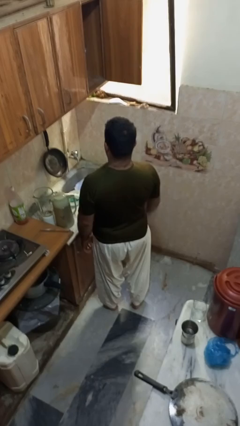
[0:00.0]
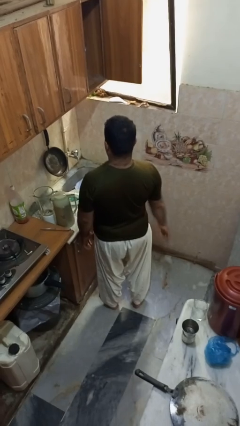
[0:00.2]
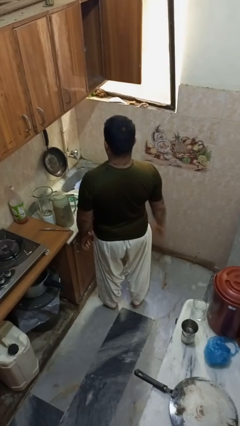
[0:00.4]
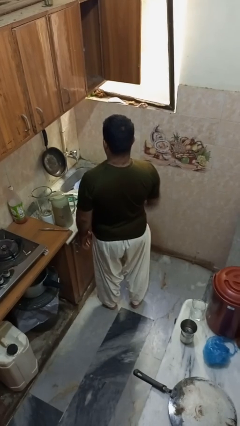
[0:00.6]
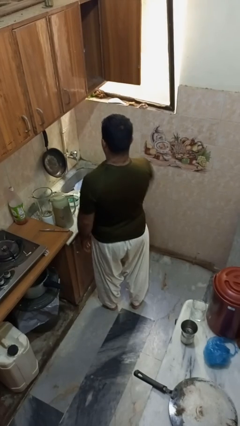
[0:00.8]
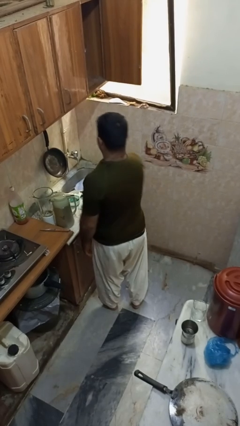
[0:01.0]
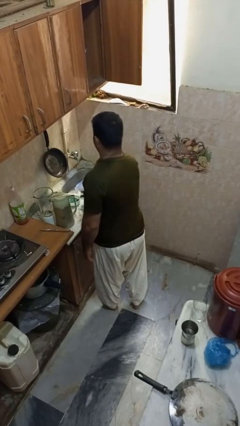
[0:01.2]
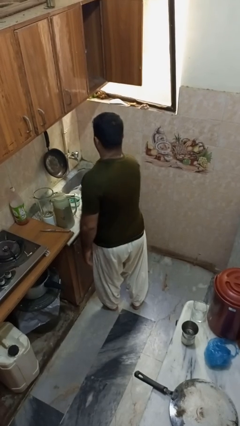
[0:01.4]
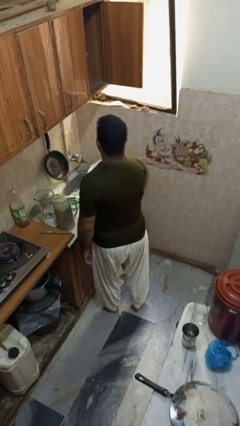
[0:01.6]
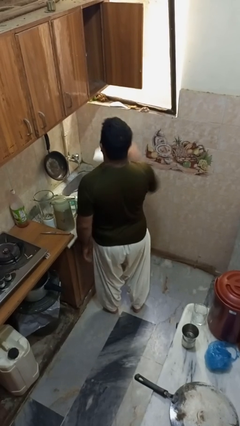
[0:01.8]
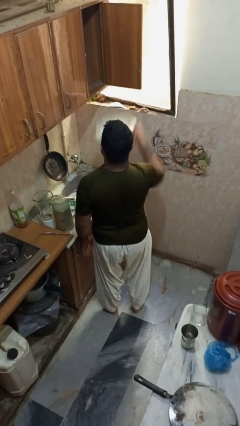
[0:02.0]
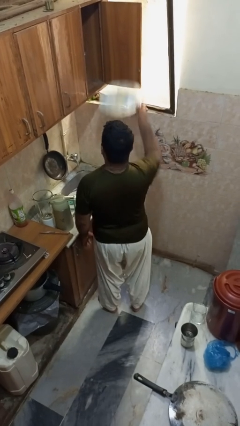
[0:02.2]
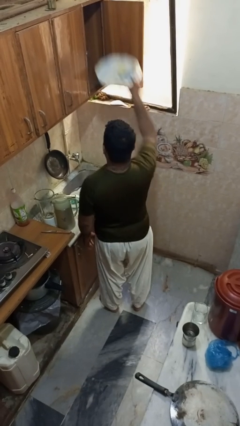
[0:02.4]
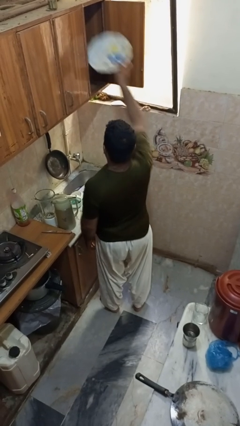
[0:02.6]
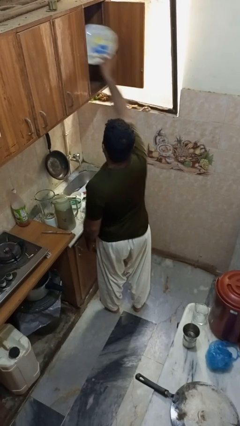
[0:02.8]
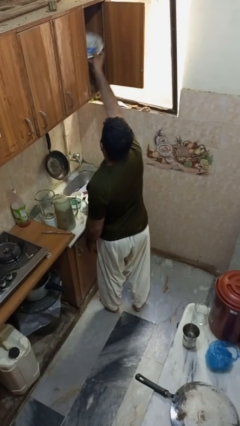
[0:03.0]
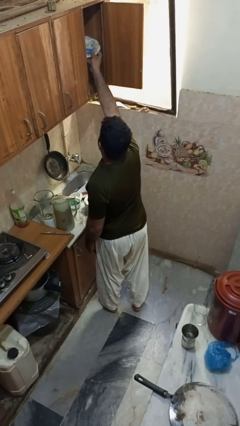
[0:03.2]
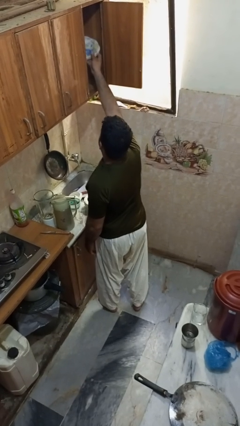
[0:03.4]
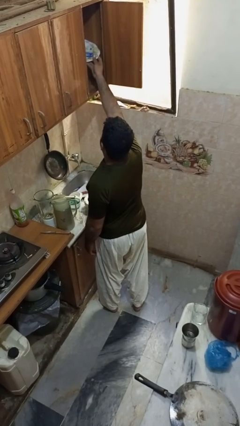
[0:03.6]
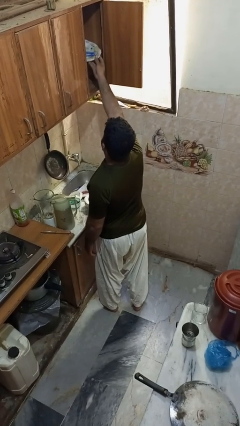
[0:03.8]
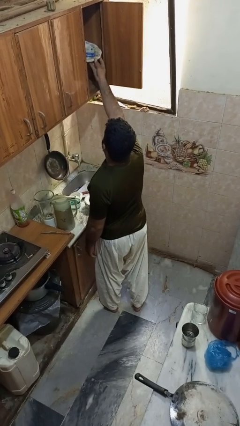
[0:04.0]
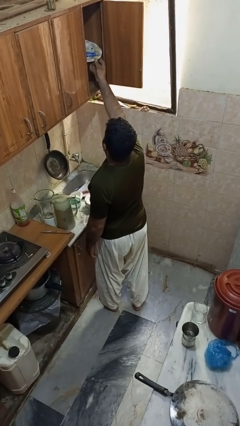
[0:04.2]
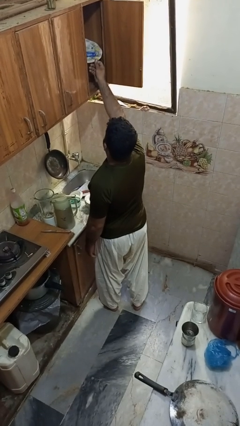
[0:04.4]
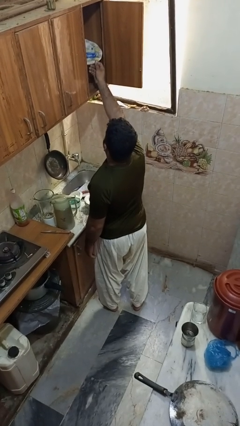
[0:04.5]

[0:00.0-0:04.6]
person puts object in cabinet

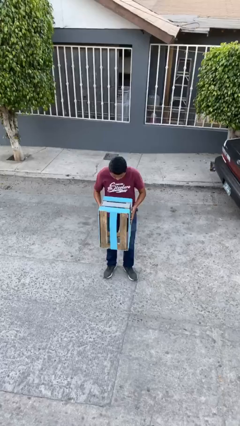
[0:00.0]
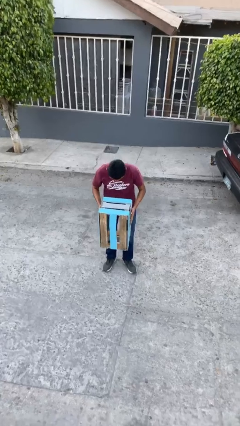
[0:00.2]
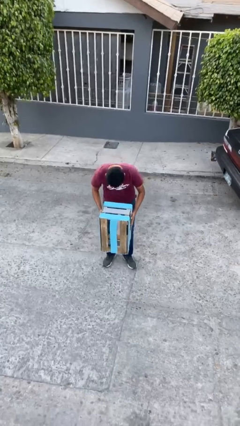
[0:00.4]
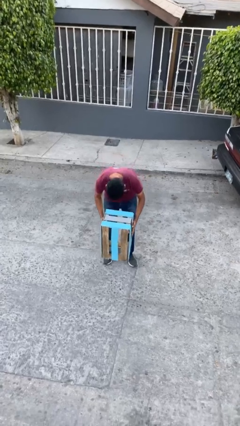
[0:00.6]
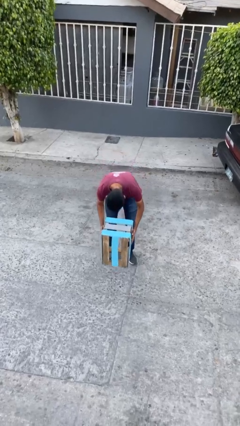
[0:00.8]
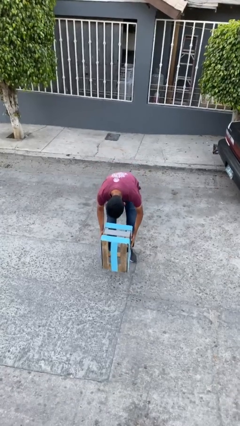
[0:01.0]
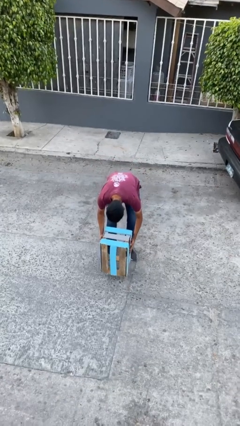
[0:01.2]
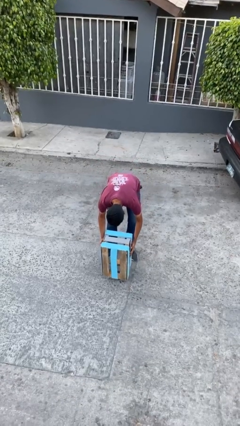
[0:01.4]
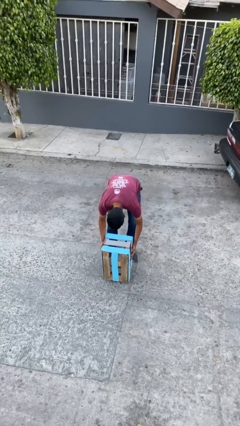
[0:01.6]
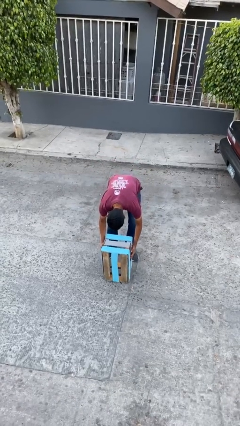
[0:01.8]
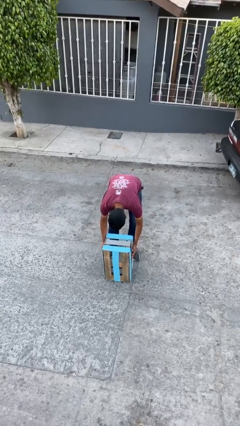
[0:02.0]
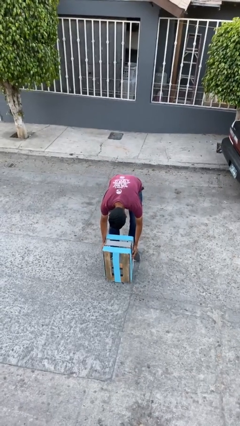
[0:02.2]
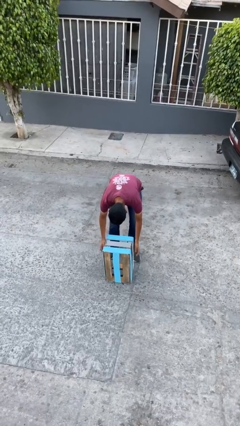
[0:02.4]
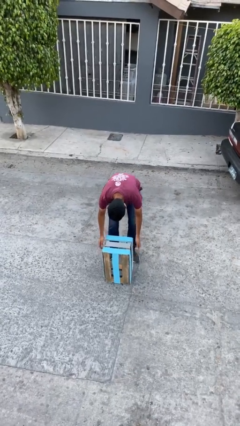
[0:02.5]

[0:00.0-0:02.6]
person puts down object on floor

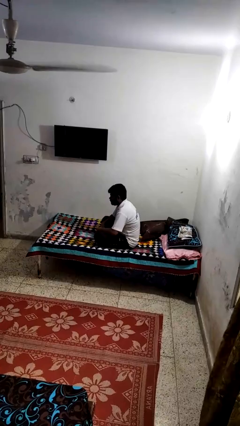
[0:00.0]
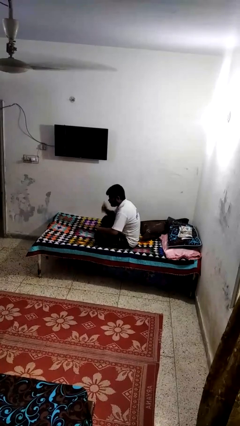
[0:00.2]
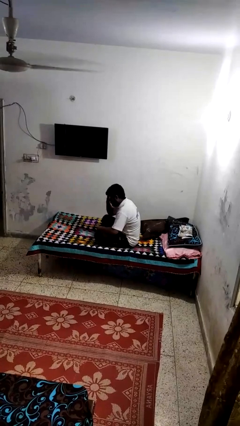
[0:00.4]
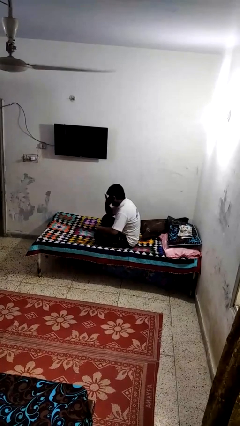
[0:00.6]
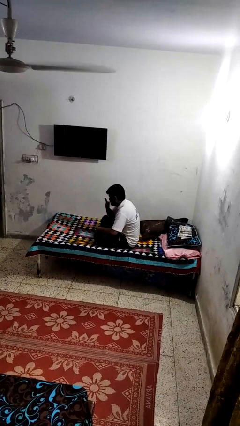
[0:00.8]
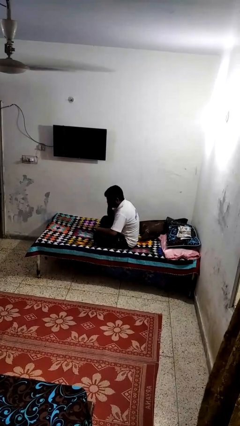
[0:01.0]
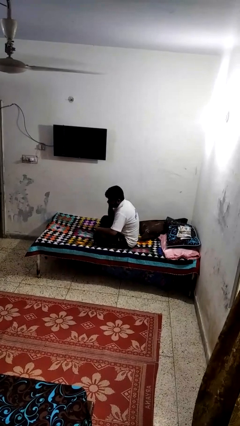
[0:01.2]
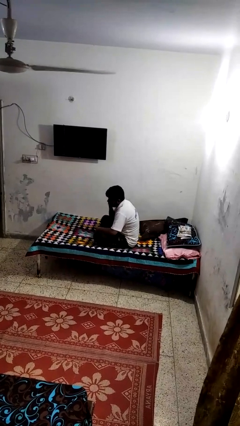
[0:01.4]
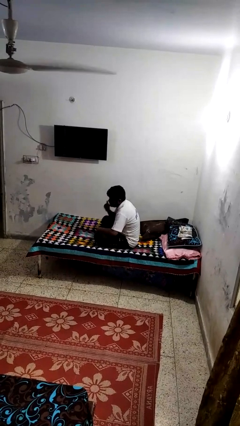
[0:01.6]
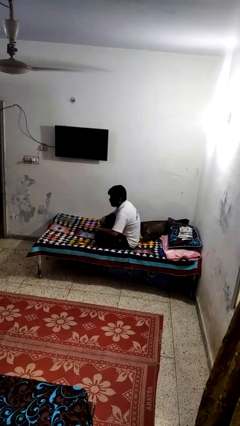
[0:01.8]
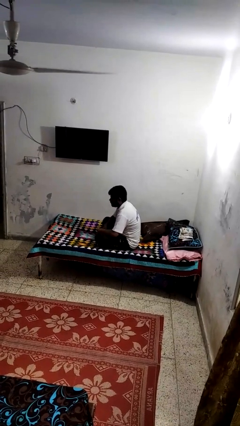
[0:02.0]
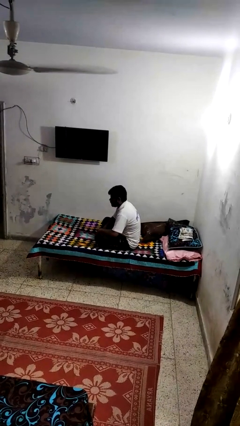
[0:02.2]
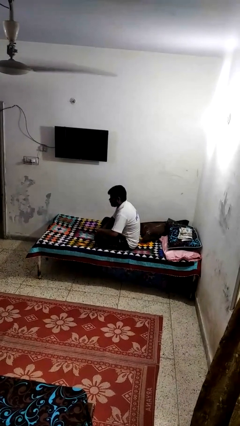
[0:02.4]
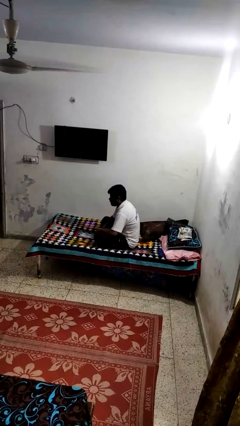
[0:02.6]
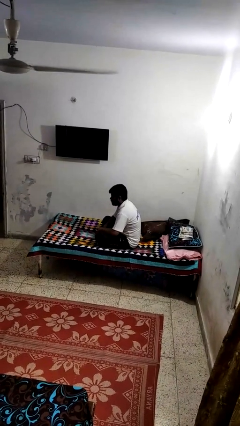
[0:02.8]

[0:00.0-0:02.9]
person scratches face

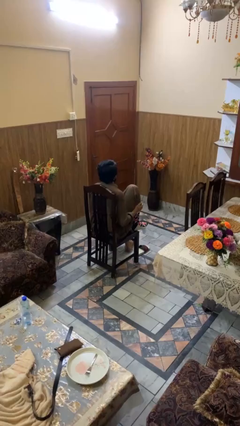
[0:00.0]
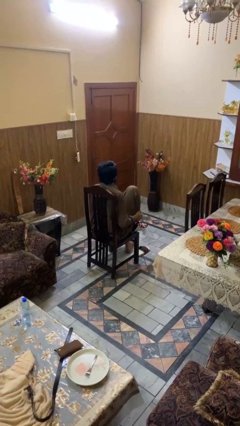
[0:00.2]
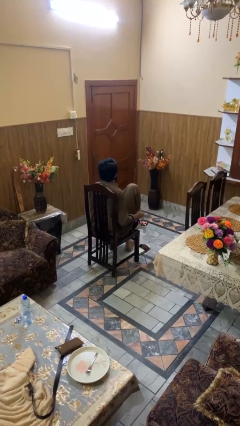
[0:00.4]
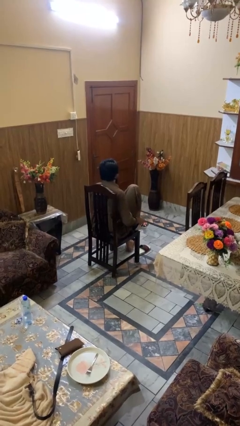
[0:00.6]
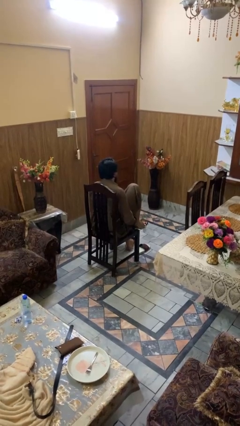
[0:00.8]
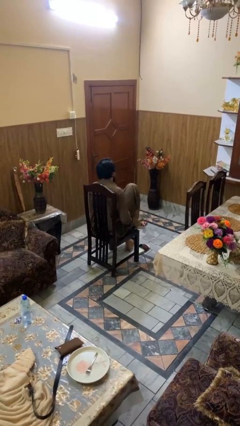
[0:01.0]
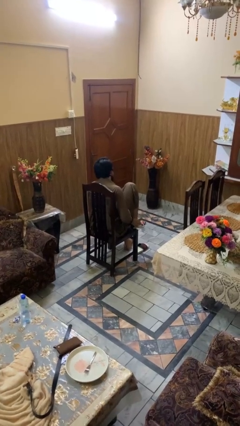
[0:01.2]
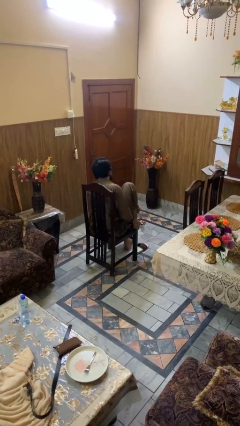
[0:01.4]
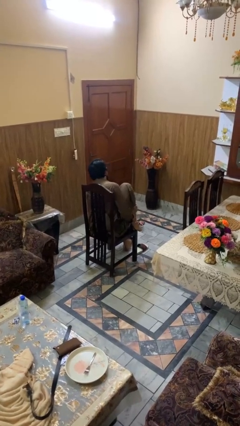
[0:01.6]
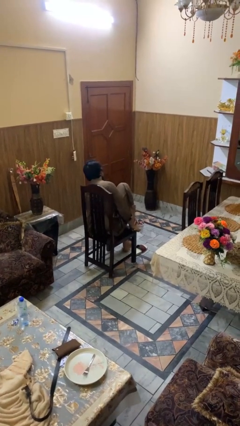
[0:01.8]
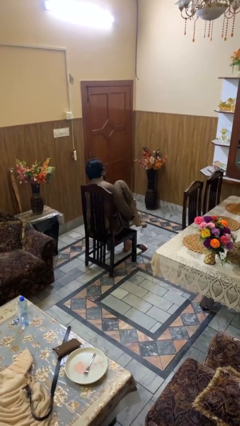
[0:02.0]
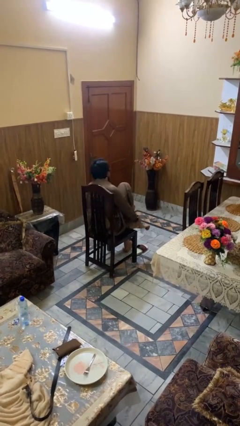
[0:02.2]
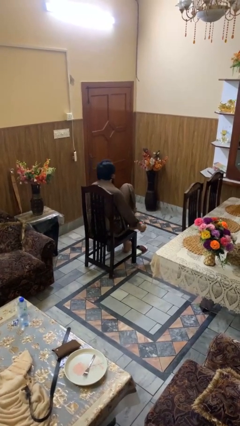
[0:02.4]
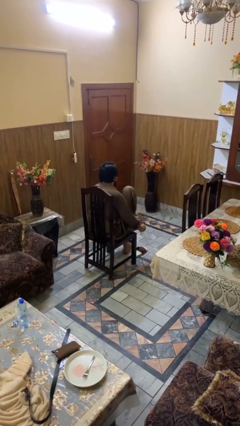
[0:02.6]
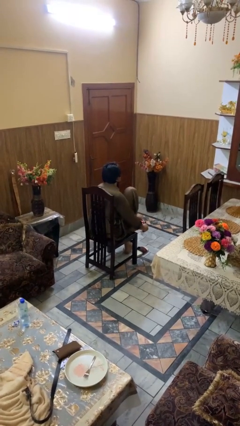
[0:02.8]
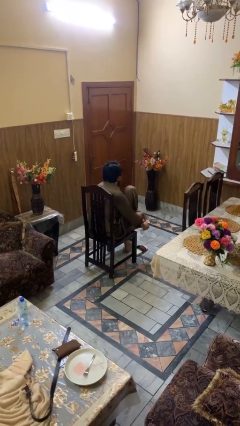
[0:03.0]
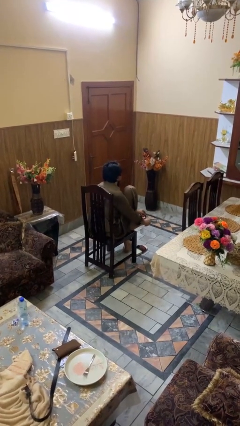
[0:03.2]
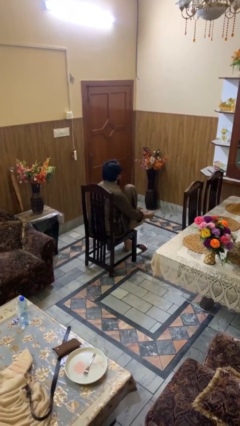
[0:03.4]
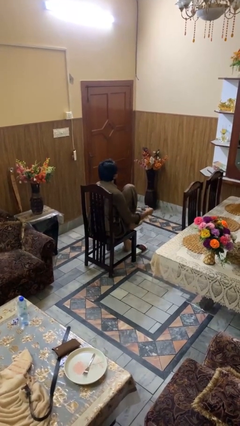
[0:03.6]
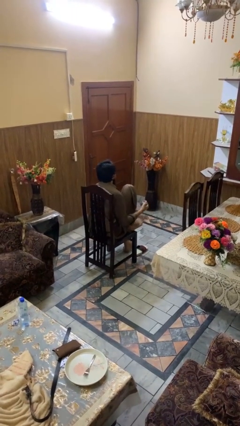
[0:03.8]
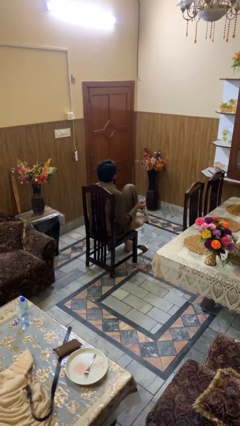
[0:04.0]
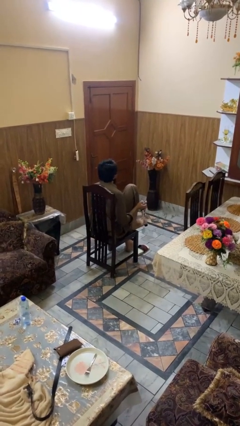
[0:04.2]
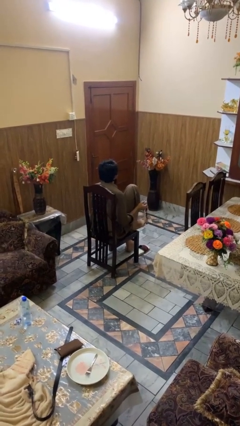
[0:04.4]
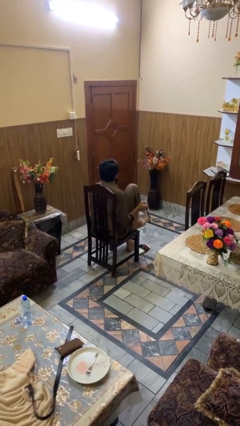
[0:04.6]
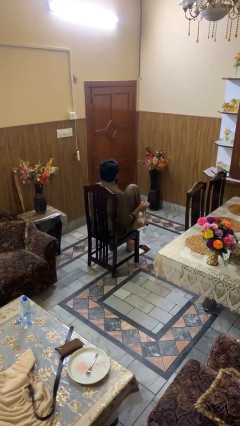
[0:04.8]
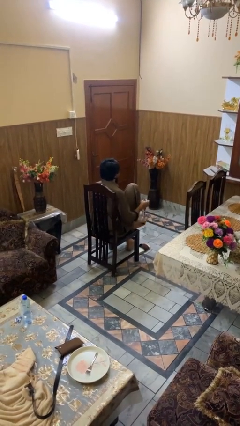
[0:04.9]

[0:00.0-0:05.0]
person takes off socks

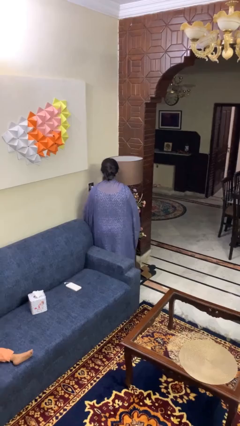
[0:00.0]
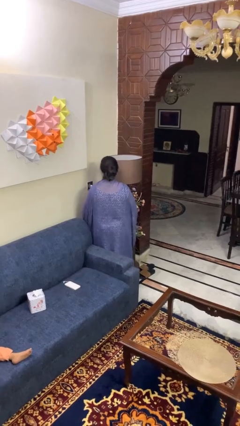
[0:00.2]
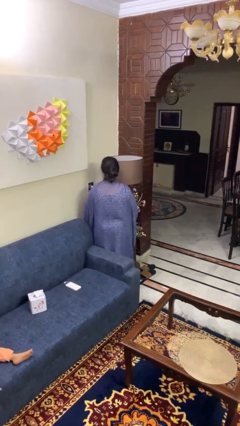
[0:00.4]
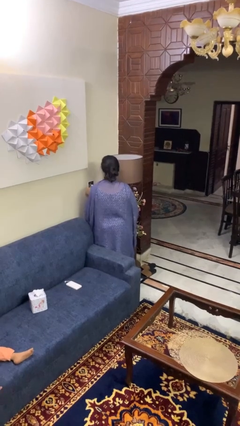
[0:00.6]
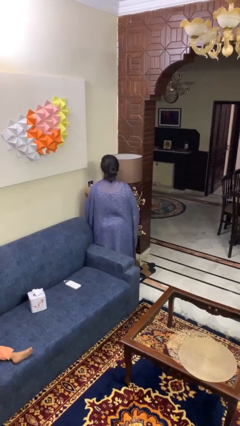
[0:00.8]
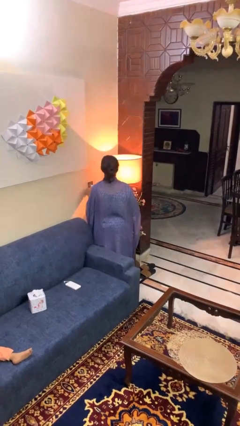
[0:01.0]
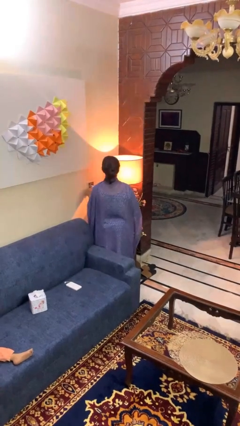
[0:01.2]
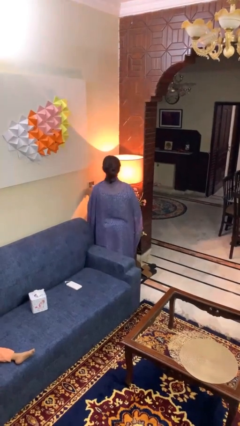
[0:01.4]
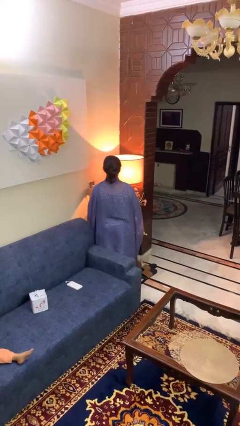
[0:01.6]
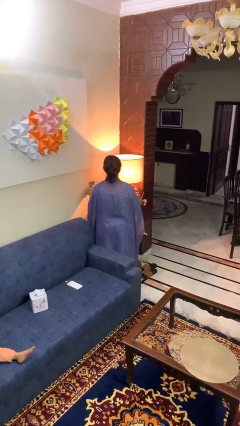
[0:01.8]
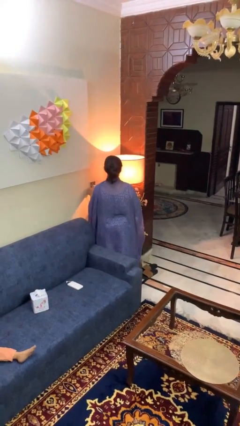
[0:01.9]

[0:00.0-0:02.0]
person turns on lamp

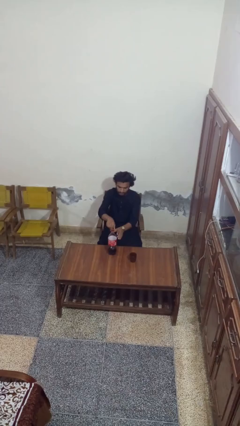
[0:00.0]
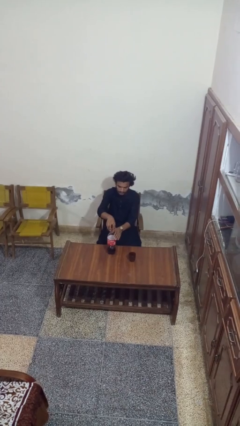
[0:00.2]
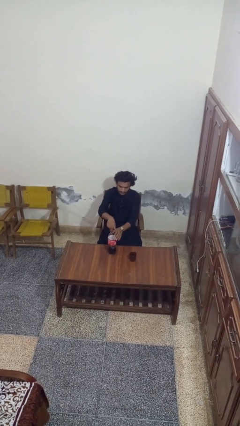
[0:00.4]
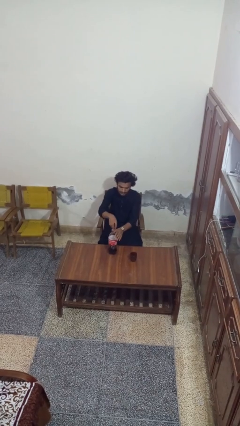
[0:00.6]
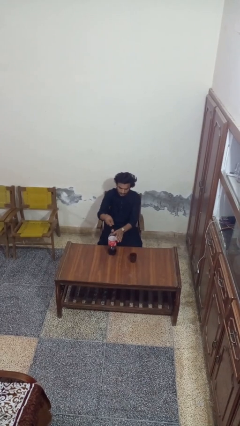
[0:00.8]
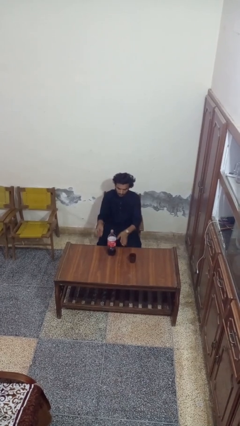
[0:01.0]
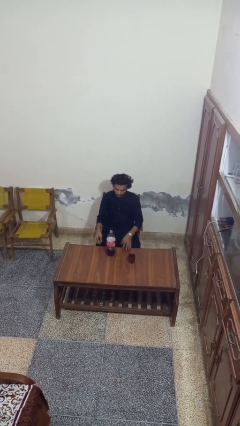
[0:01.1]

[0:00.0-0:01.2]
person unscrews lid from bottle
